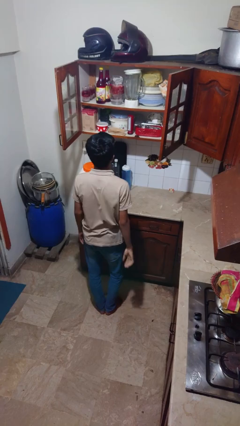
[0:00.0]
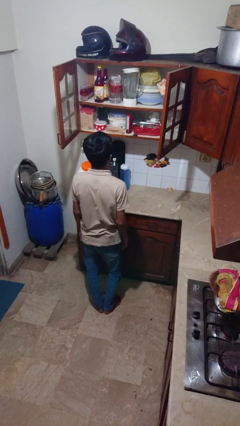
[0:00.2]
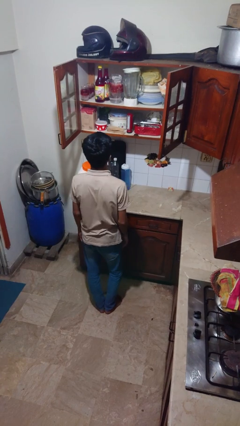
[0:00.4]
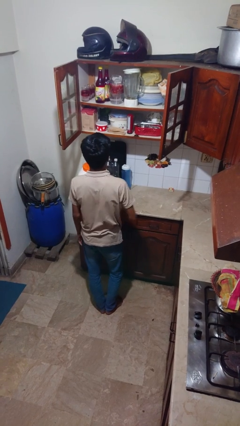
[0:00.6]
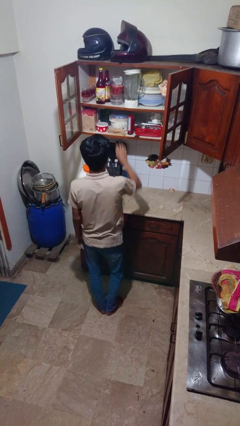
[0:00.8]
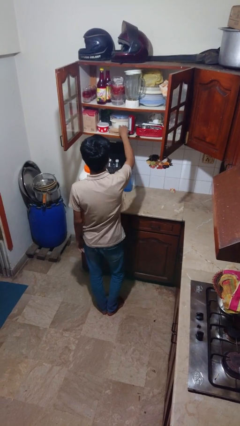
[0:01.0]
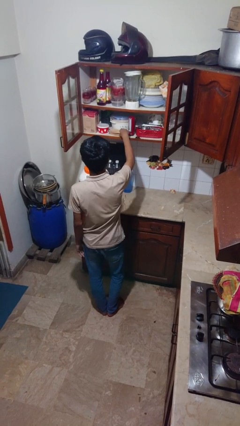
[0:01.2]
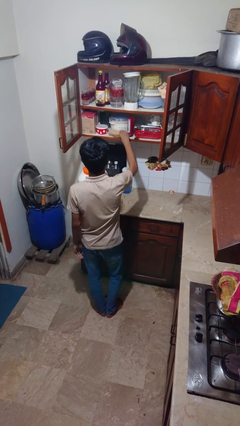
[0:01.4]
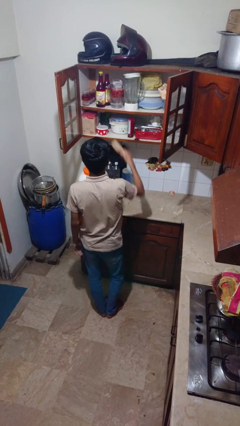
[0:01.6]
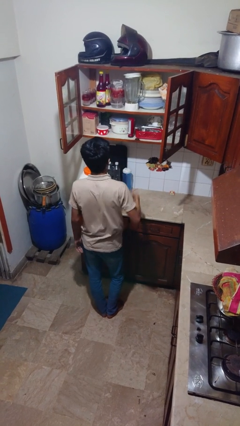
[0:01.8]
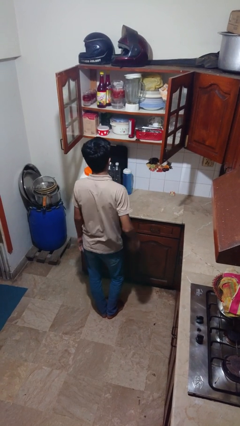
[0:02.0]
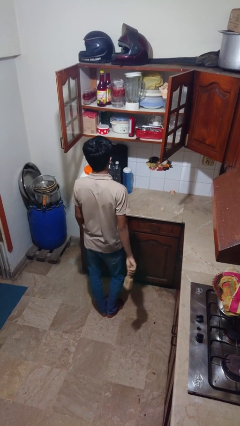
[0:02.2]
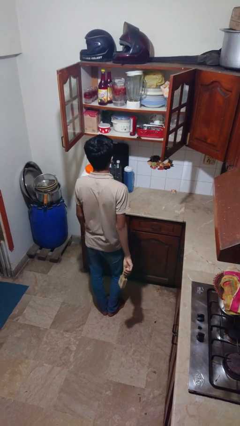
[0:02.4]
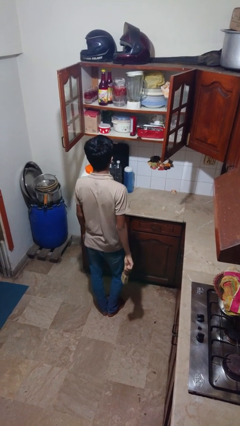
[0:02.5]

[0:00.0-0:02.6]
person picks up object from cabinet

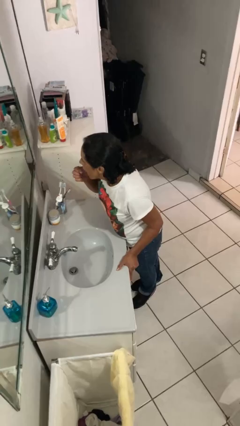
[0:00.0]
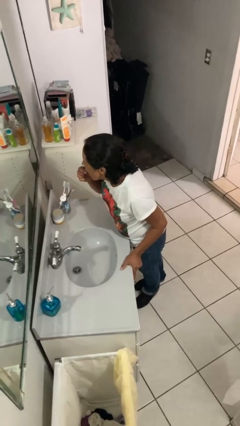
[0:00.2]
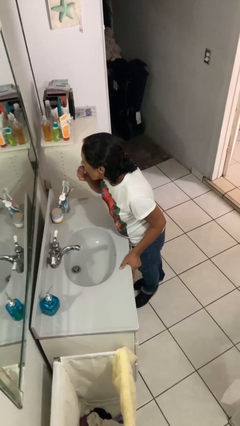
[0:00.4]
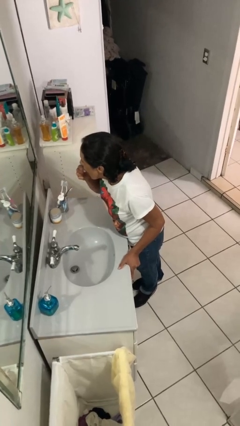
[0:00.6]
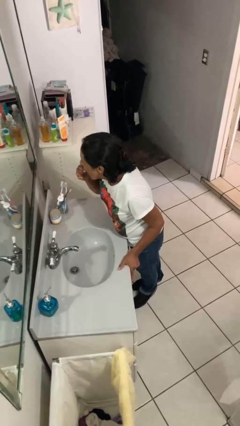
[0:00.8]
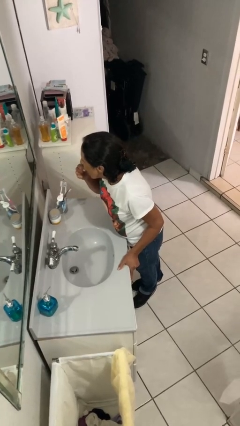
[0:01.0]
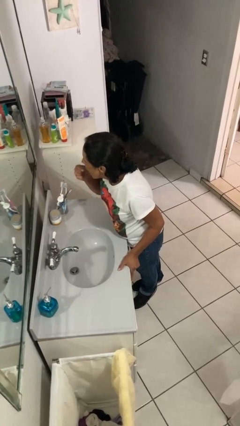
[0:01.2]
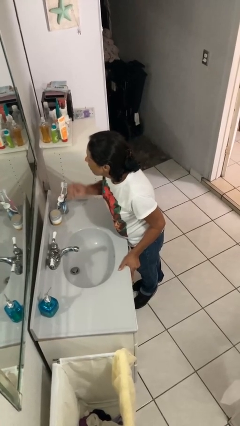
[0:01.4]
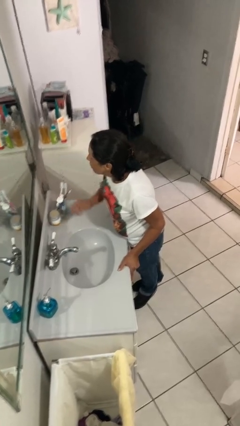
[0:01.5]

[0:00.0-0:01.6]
person flosses

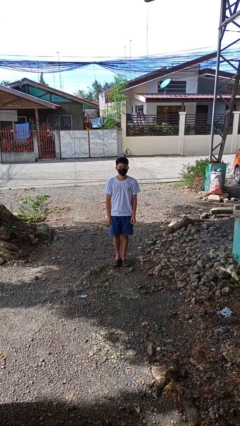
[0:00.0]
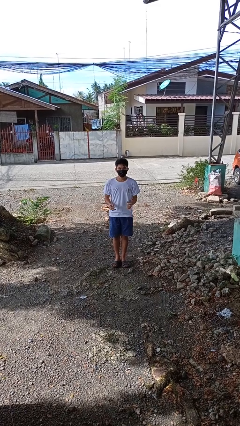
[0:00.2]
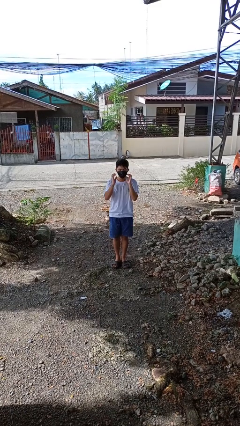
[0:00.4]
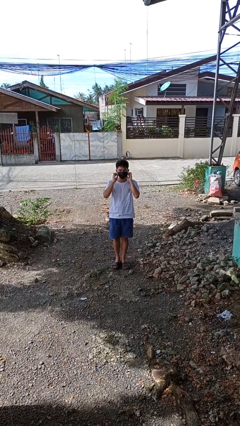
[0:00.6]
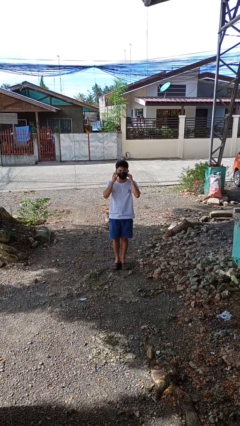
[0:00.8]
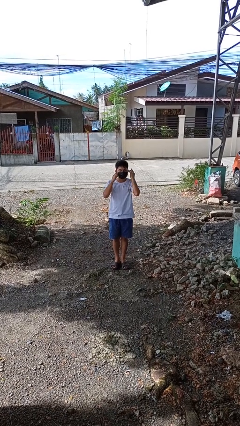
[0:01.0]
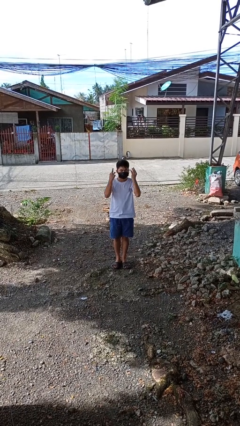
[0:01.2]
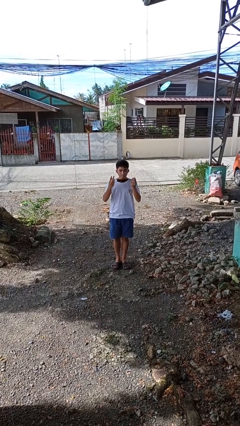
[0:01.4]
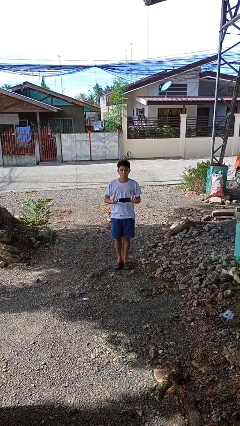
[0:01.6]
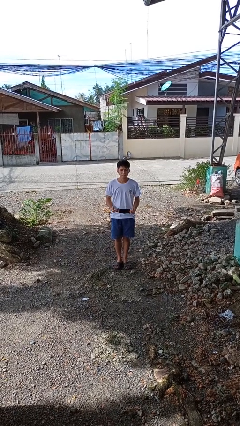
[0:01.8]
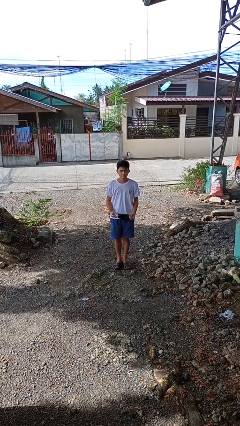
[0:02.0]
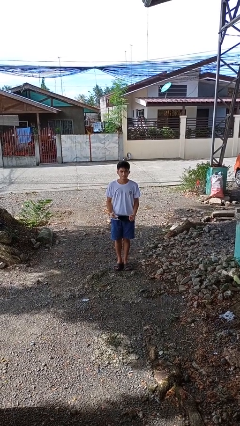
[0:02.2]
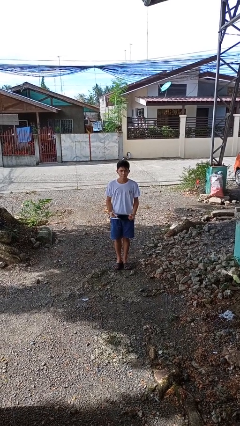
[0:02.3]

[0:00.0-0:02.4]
person takes off facemask

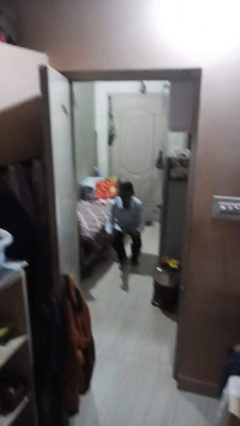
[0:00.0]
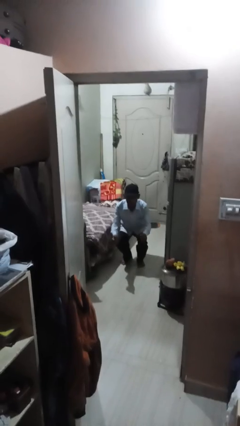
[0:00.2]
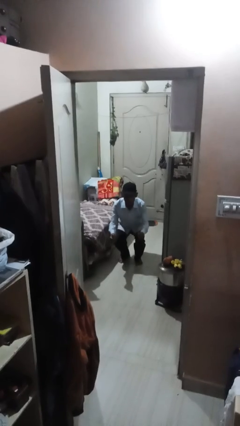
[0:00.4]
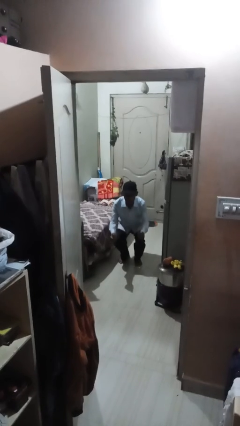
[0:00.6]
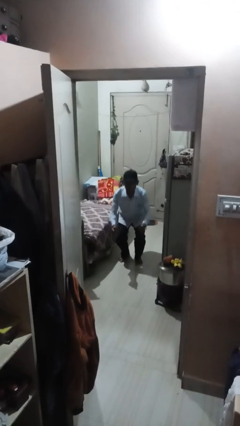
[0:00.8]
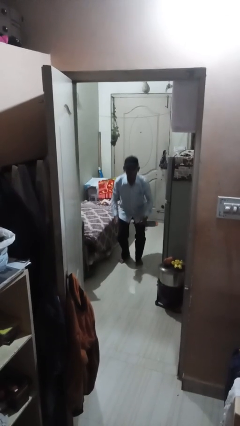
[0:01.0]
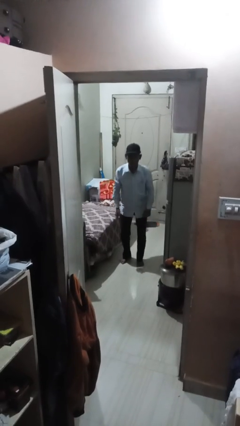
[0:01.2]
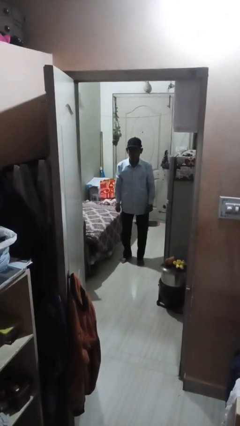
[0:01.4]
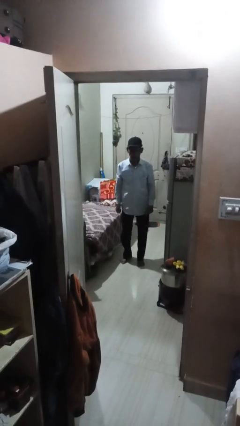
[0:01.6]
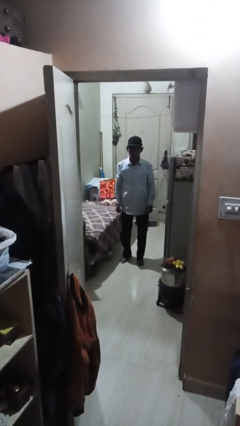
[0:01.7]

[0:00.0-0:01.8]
person stands up

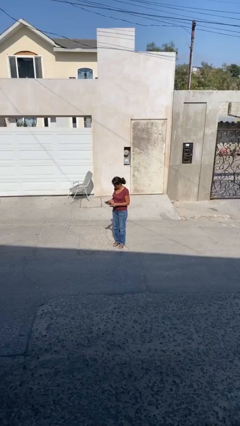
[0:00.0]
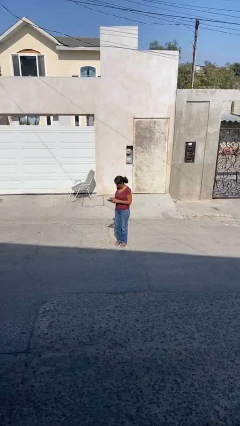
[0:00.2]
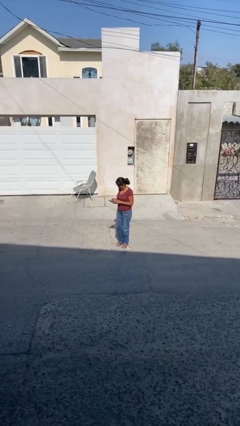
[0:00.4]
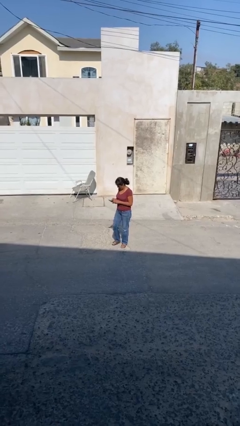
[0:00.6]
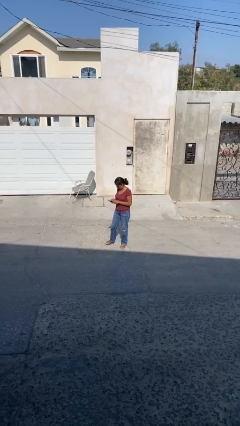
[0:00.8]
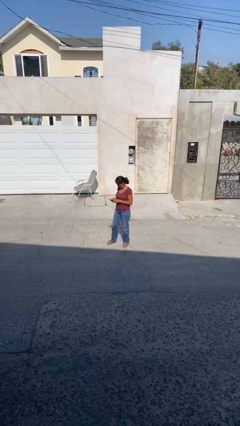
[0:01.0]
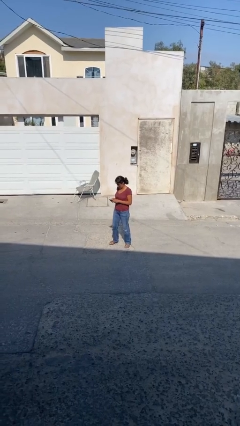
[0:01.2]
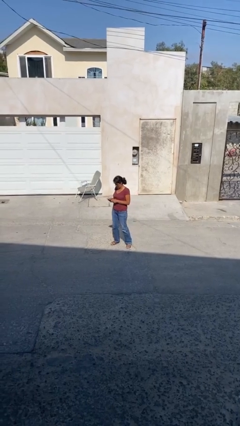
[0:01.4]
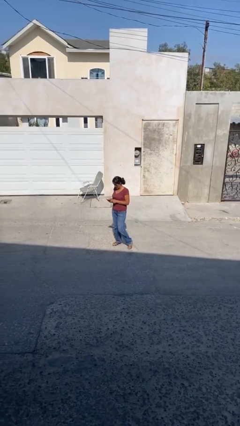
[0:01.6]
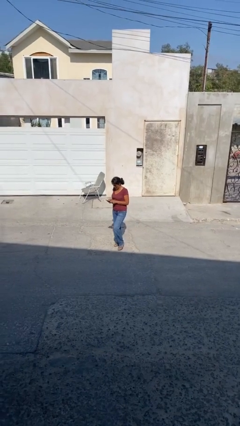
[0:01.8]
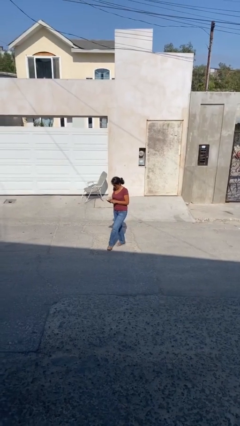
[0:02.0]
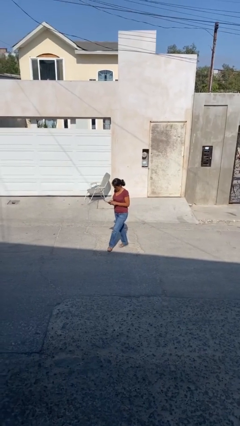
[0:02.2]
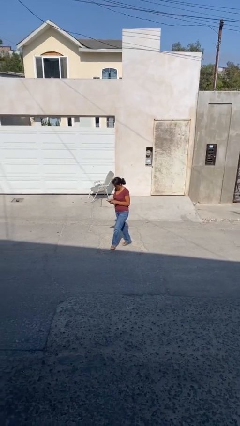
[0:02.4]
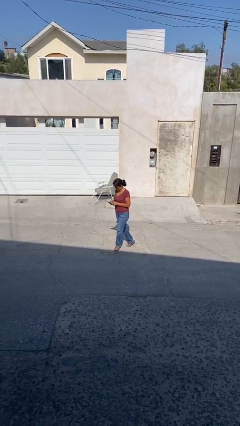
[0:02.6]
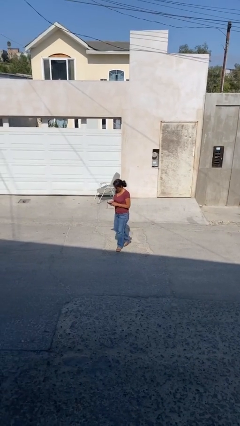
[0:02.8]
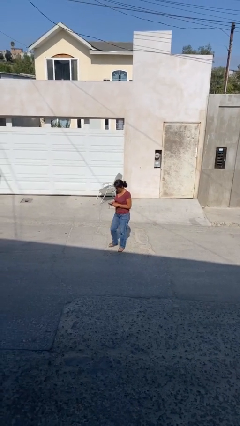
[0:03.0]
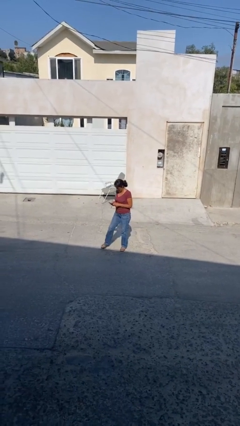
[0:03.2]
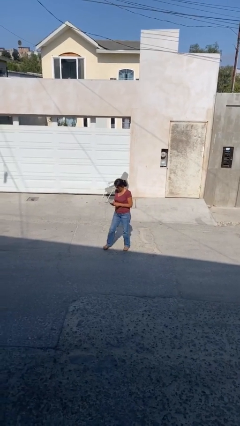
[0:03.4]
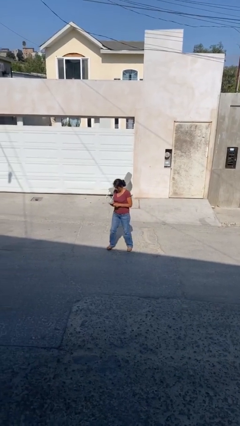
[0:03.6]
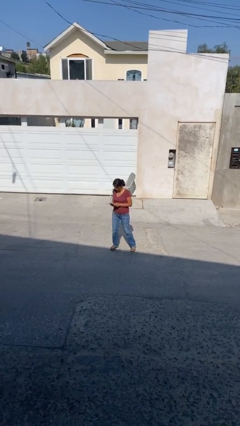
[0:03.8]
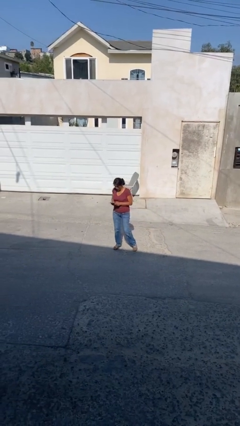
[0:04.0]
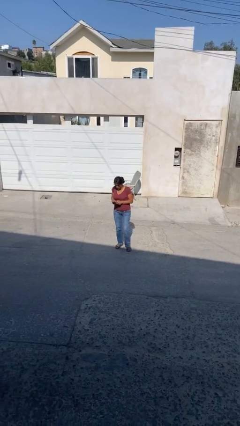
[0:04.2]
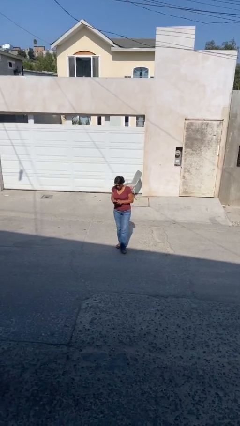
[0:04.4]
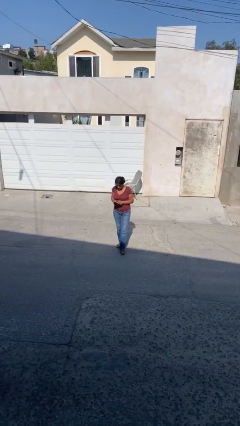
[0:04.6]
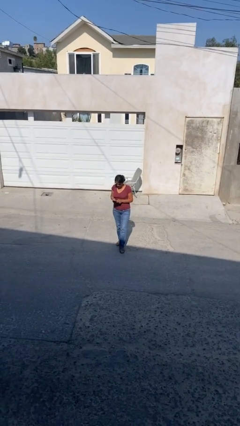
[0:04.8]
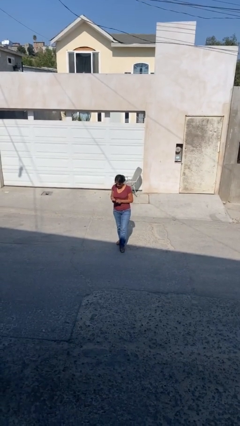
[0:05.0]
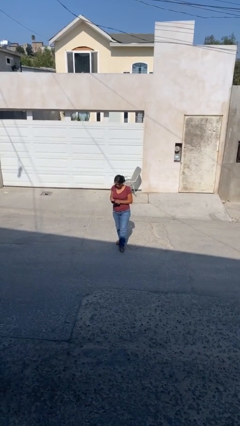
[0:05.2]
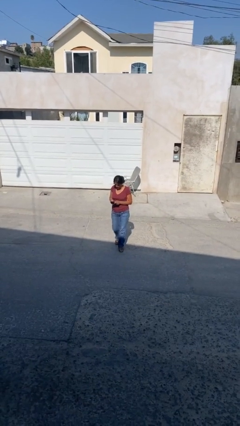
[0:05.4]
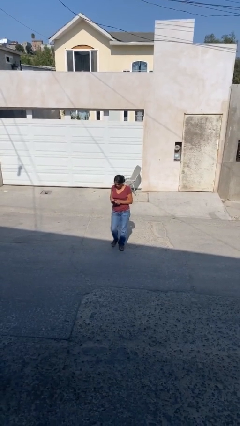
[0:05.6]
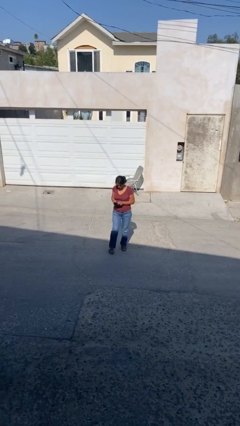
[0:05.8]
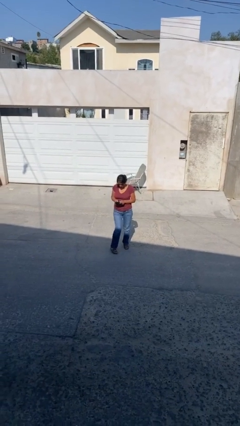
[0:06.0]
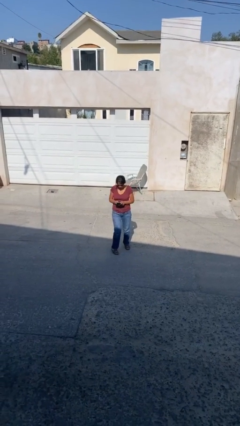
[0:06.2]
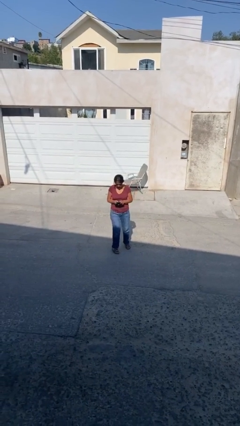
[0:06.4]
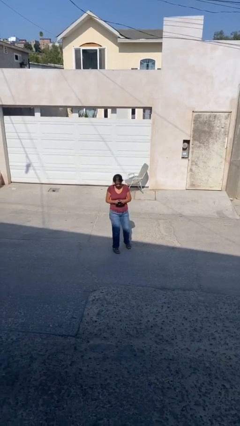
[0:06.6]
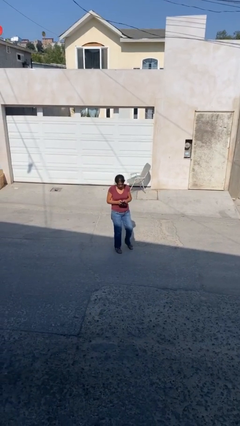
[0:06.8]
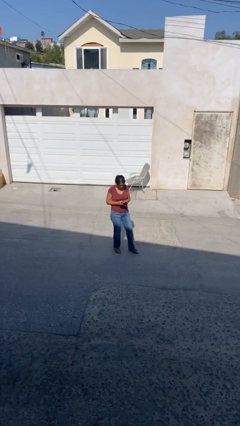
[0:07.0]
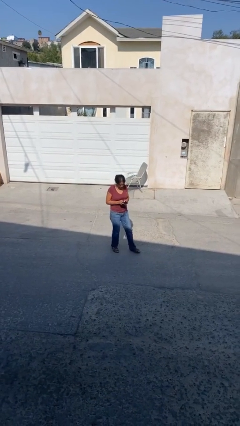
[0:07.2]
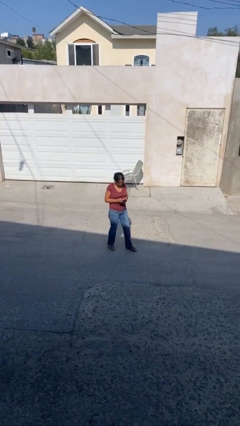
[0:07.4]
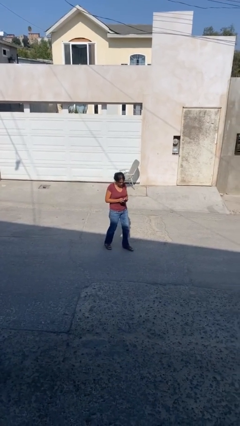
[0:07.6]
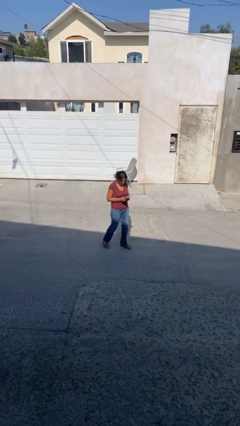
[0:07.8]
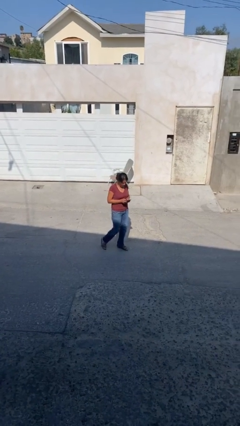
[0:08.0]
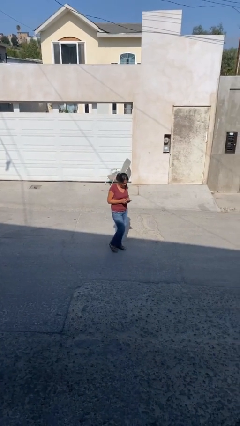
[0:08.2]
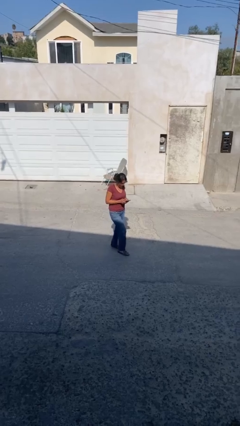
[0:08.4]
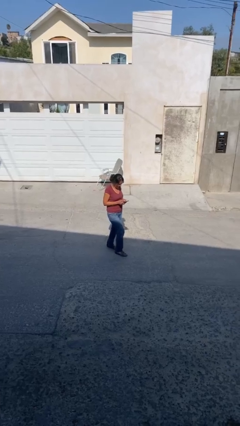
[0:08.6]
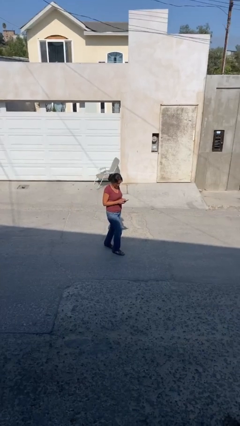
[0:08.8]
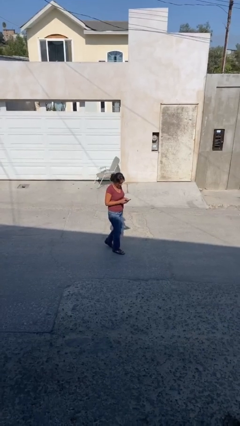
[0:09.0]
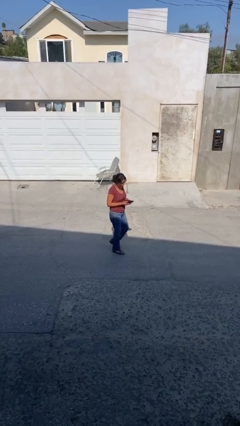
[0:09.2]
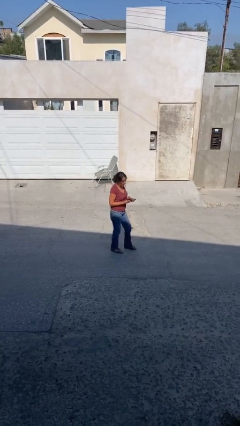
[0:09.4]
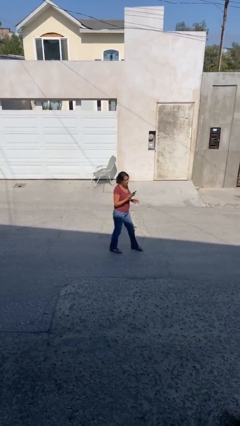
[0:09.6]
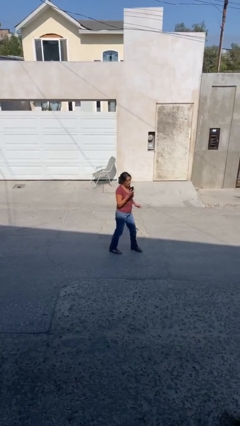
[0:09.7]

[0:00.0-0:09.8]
person texts on phone
